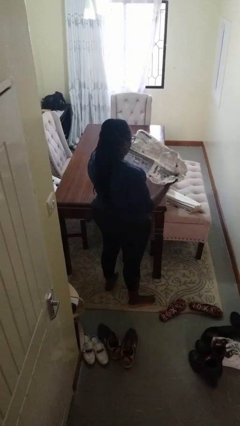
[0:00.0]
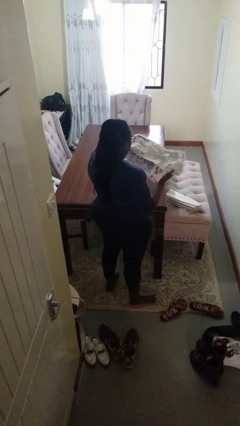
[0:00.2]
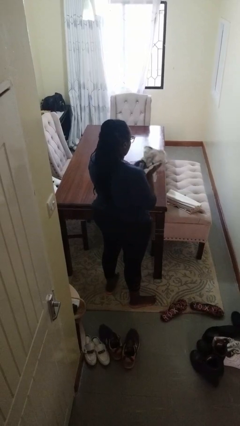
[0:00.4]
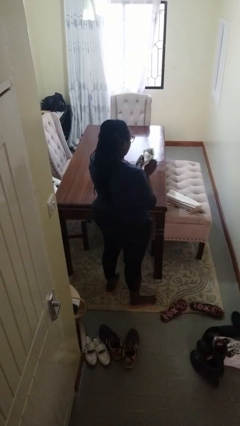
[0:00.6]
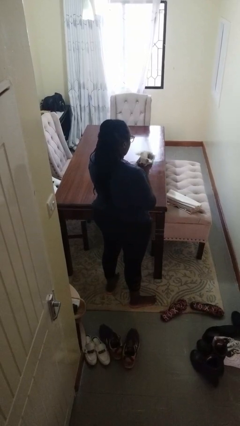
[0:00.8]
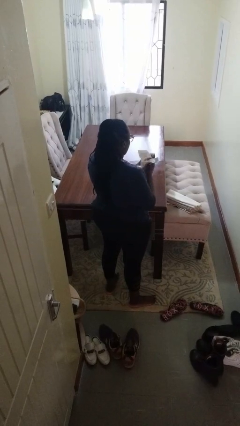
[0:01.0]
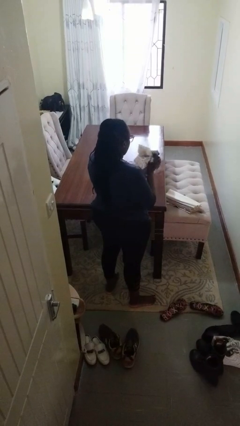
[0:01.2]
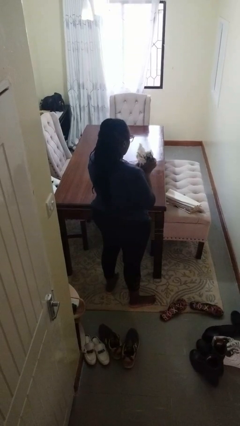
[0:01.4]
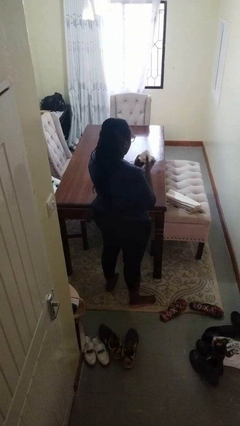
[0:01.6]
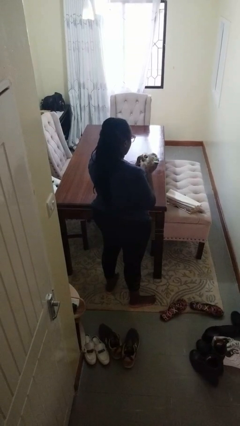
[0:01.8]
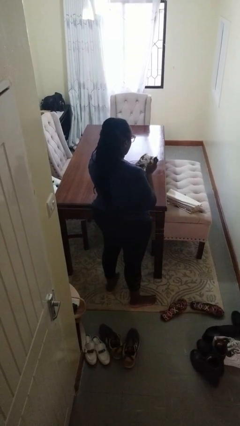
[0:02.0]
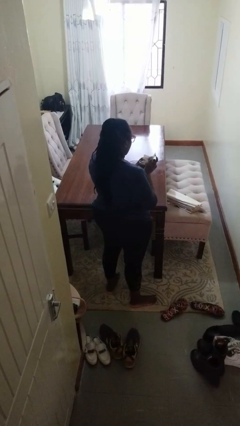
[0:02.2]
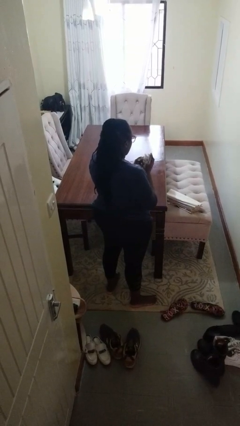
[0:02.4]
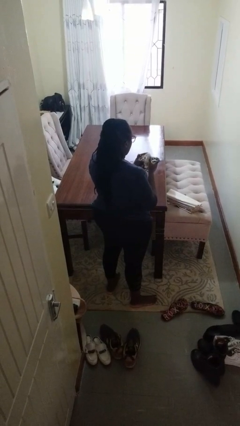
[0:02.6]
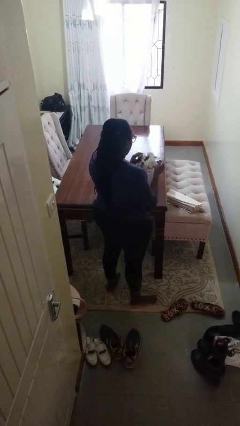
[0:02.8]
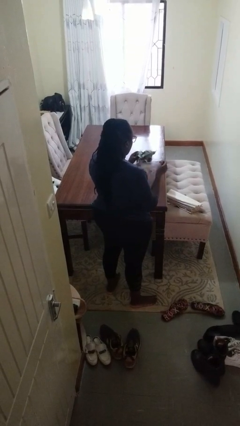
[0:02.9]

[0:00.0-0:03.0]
person crumples paper

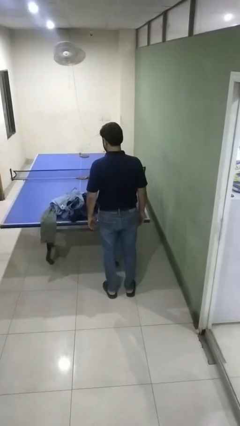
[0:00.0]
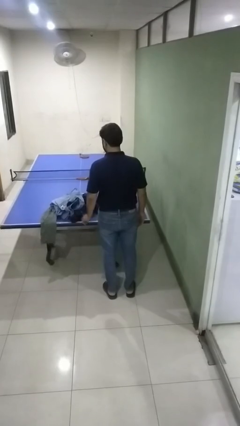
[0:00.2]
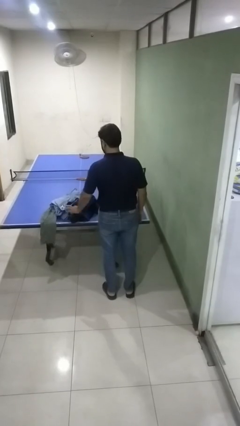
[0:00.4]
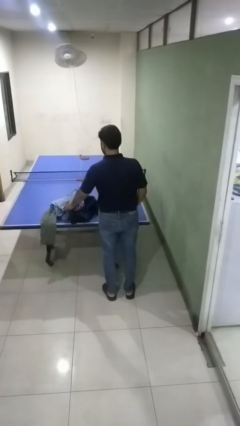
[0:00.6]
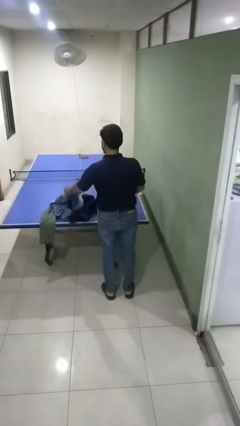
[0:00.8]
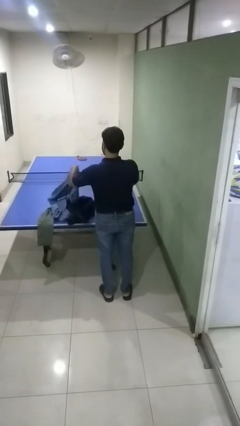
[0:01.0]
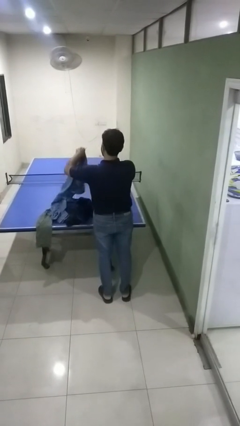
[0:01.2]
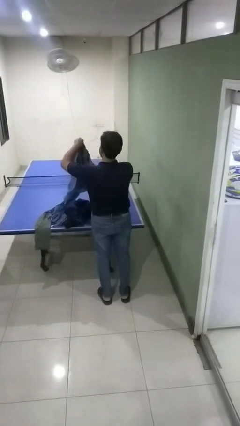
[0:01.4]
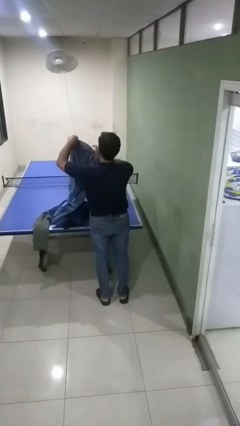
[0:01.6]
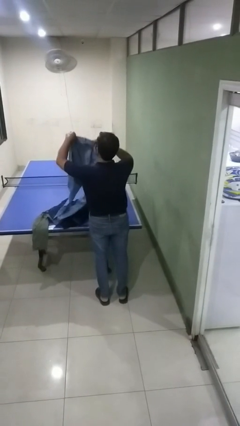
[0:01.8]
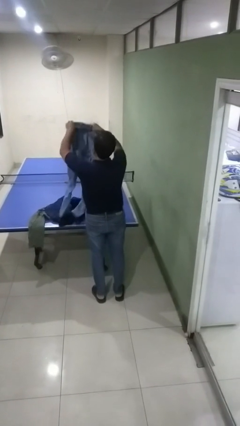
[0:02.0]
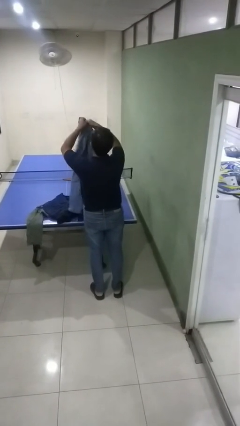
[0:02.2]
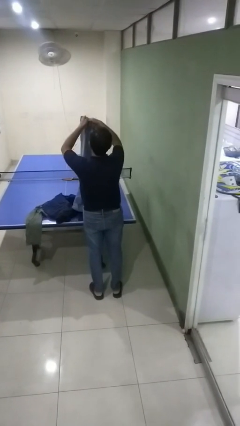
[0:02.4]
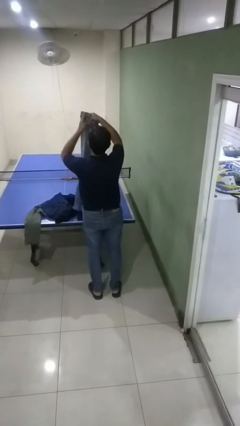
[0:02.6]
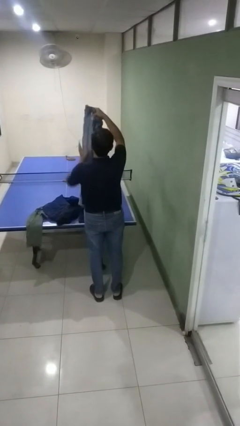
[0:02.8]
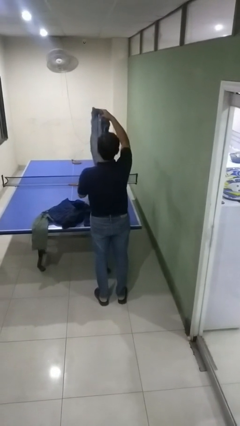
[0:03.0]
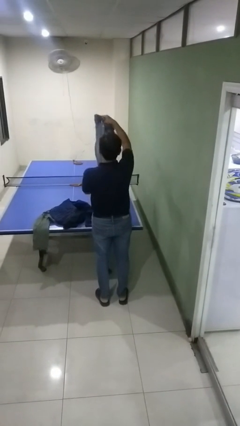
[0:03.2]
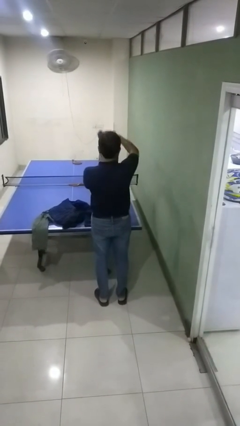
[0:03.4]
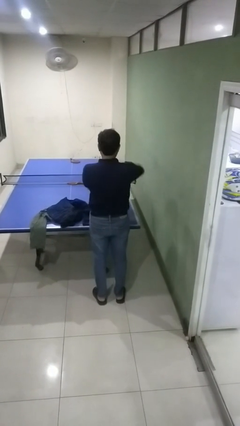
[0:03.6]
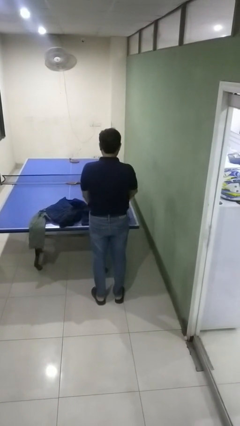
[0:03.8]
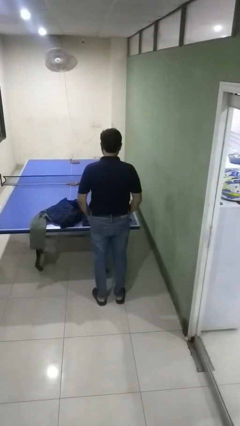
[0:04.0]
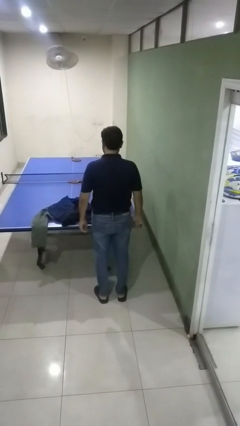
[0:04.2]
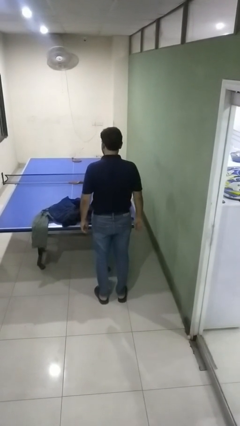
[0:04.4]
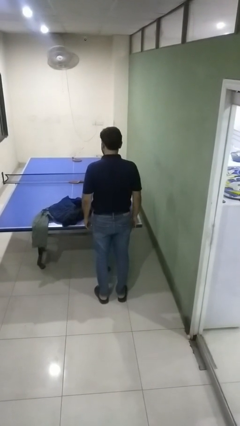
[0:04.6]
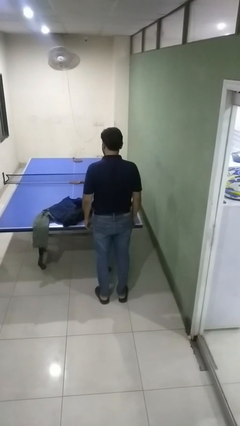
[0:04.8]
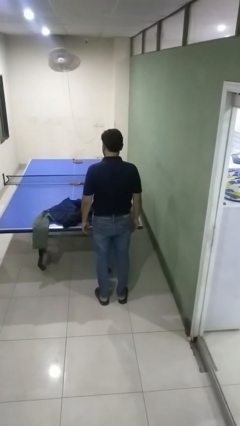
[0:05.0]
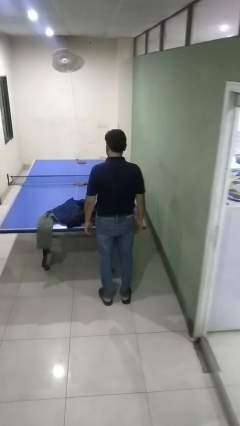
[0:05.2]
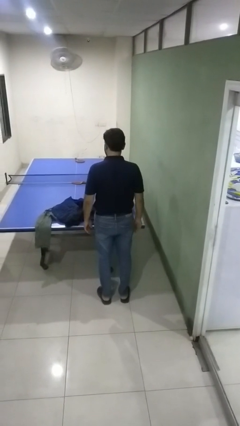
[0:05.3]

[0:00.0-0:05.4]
person folds pants

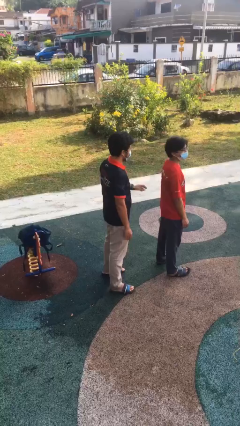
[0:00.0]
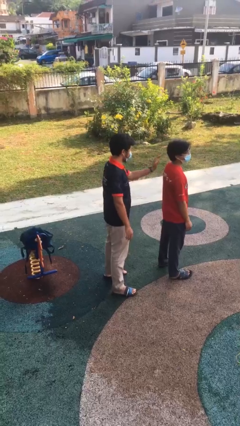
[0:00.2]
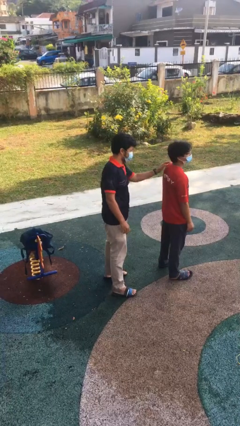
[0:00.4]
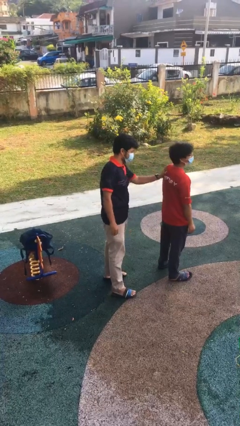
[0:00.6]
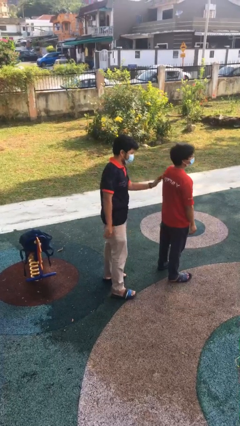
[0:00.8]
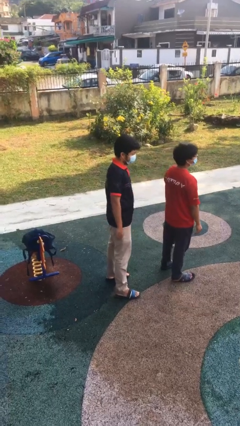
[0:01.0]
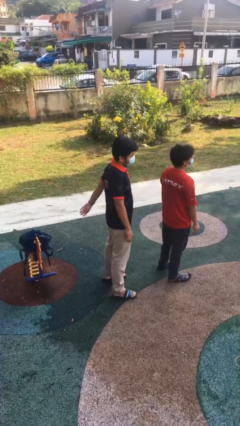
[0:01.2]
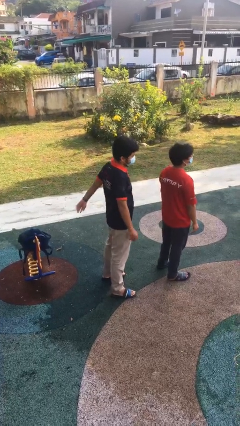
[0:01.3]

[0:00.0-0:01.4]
person touches back of person

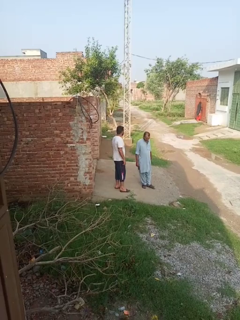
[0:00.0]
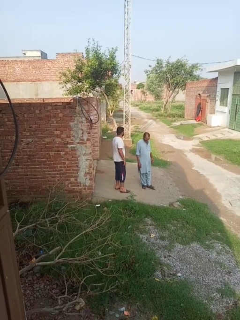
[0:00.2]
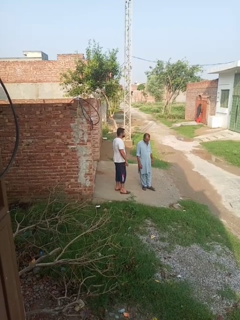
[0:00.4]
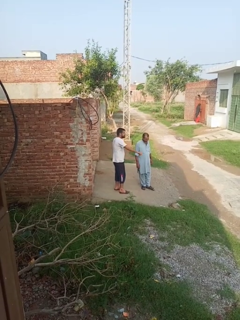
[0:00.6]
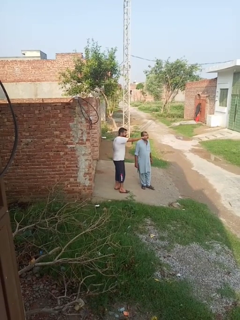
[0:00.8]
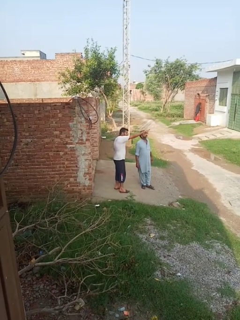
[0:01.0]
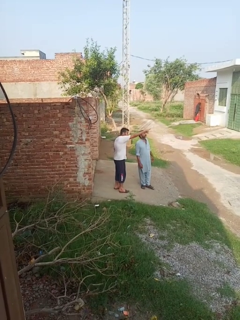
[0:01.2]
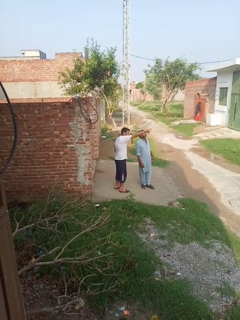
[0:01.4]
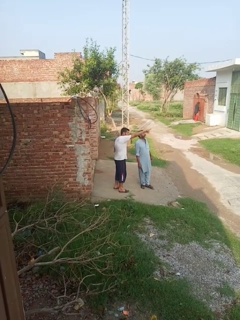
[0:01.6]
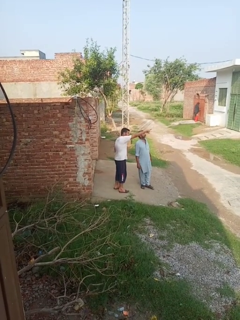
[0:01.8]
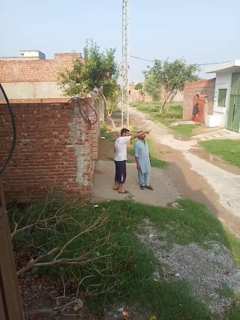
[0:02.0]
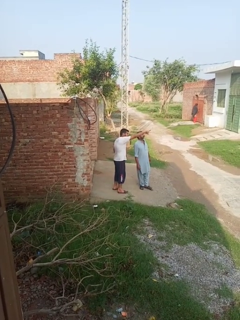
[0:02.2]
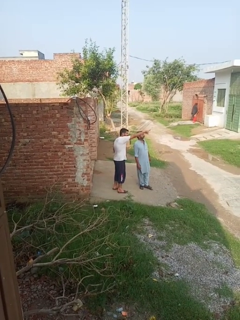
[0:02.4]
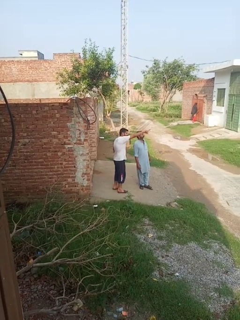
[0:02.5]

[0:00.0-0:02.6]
person points at person

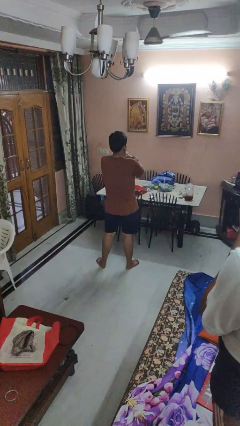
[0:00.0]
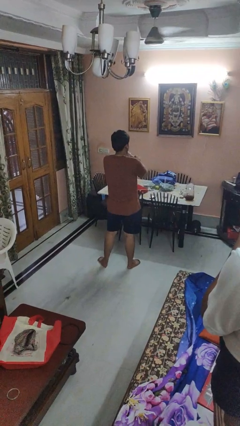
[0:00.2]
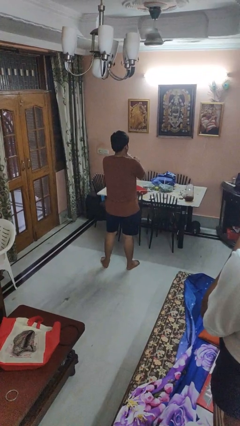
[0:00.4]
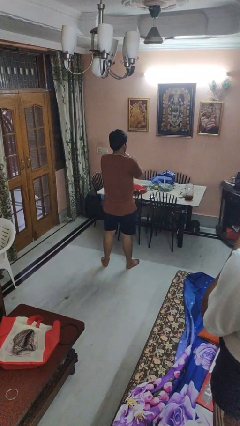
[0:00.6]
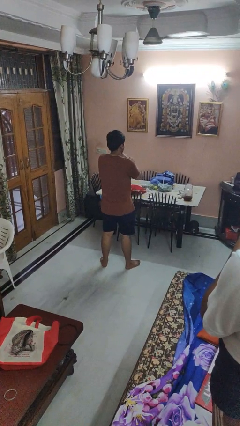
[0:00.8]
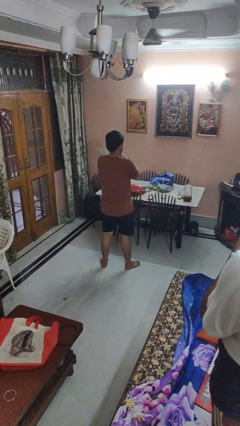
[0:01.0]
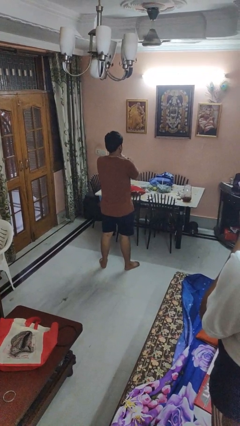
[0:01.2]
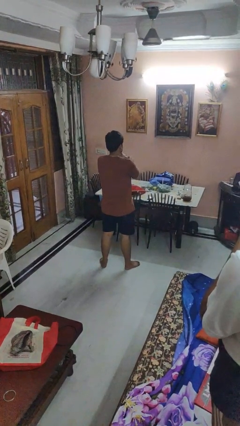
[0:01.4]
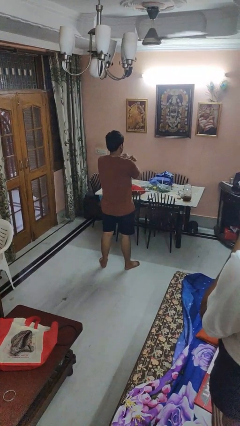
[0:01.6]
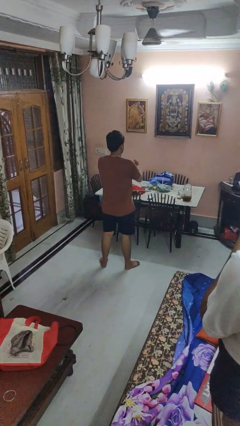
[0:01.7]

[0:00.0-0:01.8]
person gestures arms x

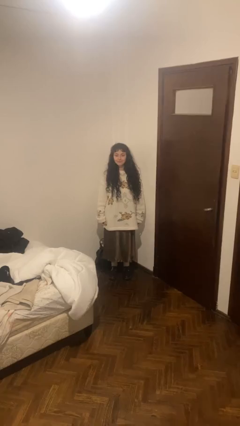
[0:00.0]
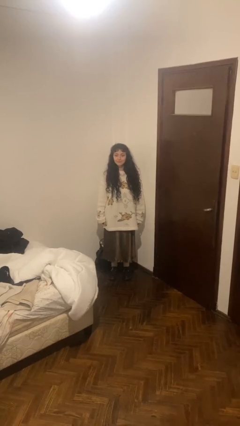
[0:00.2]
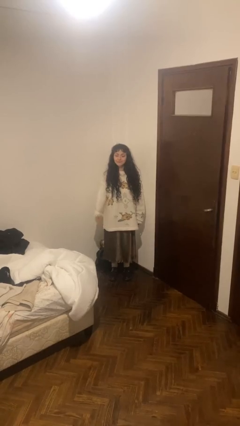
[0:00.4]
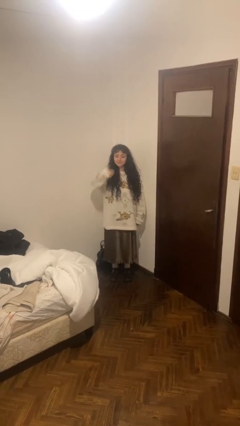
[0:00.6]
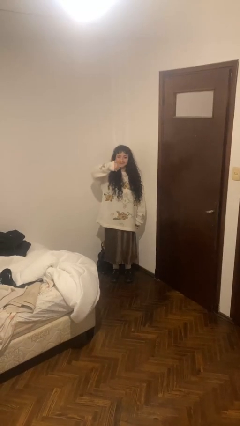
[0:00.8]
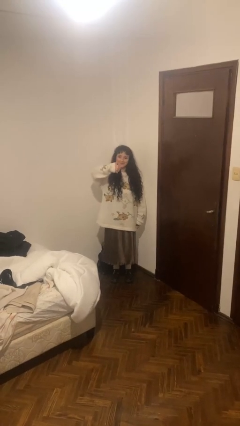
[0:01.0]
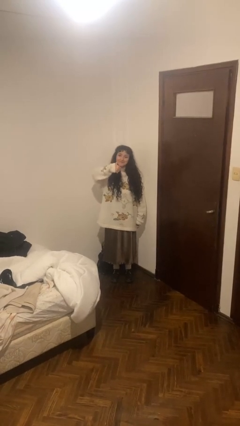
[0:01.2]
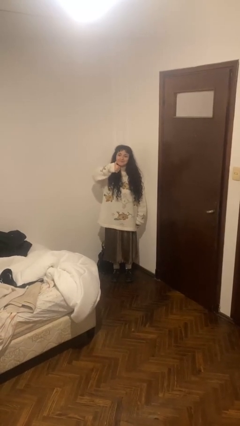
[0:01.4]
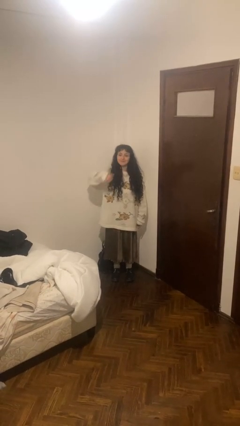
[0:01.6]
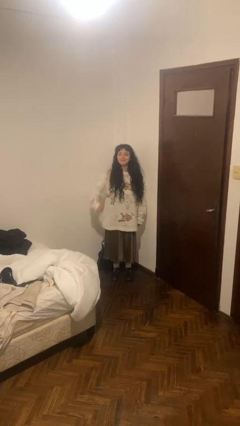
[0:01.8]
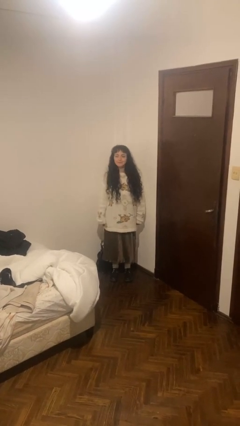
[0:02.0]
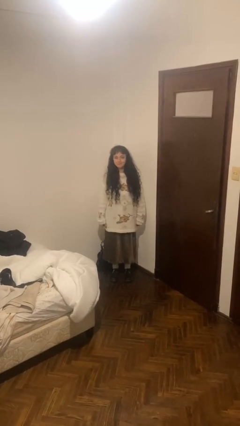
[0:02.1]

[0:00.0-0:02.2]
person gestures thumbs up

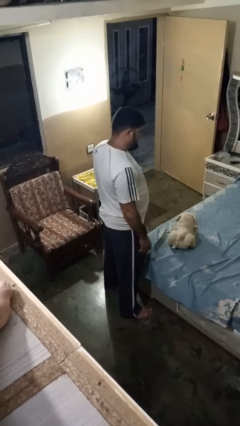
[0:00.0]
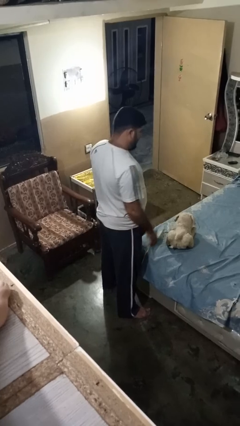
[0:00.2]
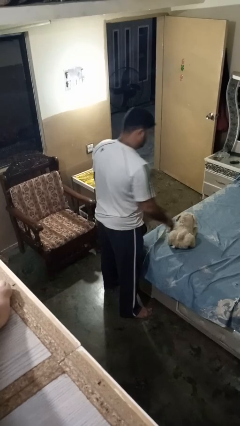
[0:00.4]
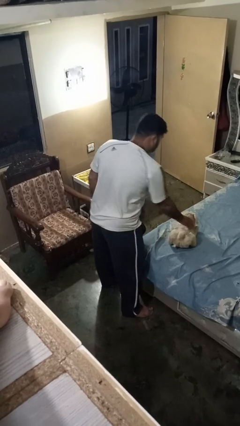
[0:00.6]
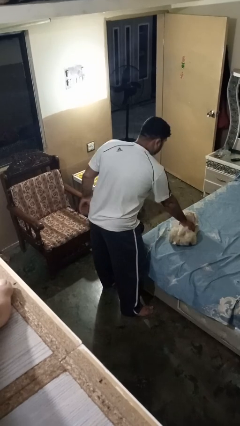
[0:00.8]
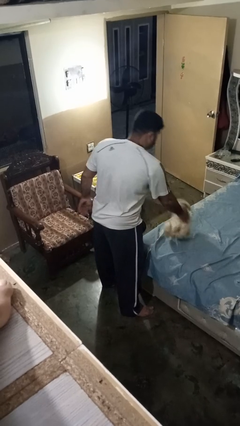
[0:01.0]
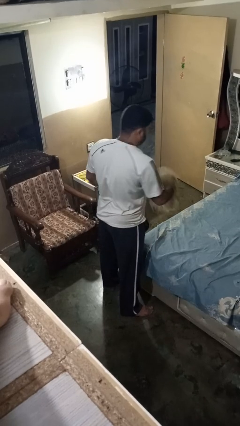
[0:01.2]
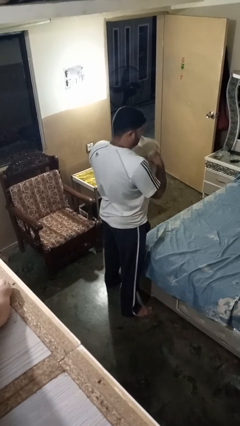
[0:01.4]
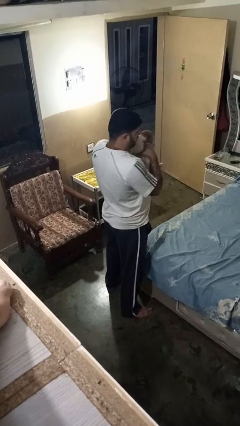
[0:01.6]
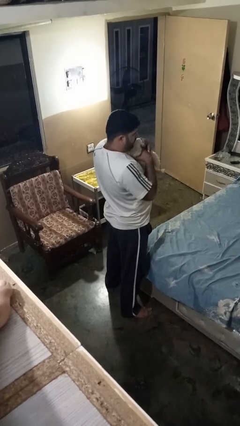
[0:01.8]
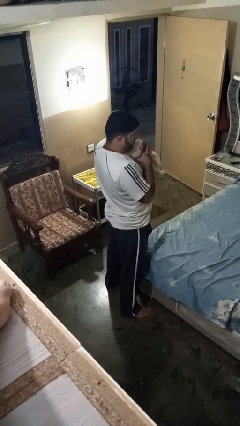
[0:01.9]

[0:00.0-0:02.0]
person hugs stuffed animal
